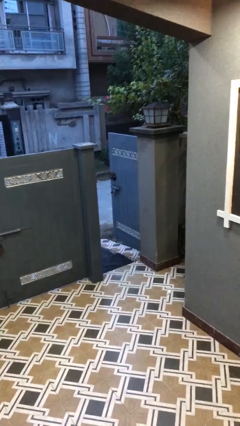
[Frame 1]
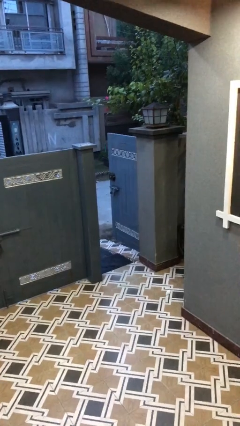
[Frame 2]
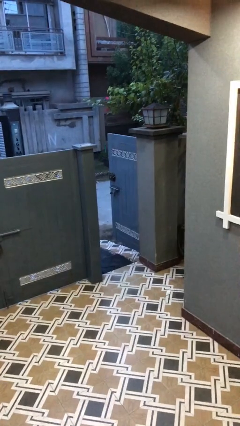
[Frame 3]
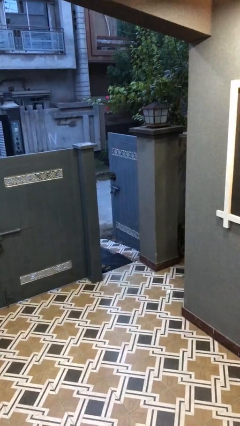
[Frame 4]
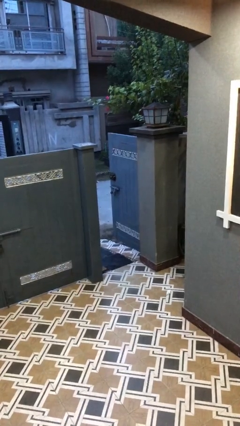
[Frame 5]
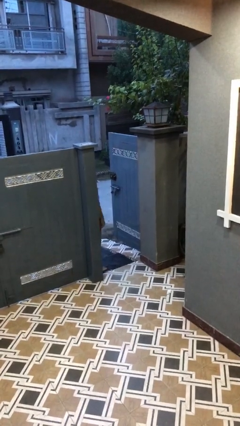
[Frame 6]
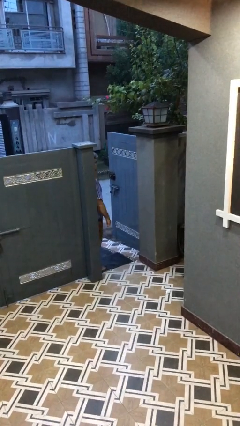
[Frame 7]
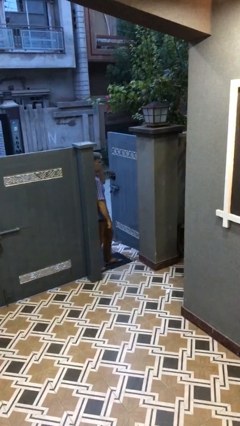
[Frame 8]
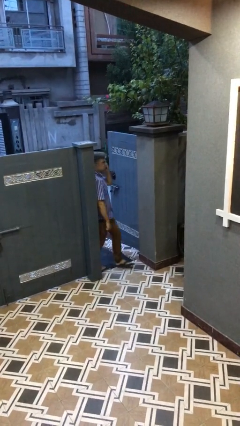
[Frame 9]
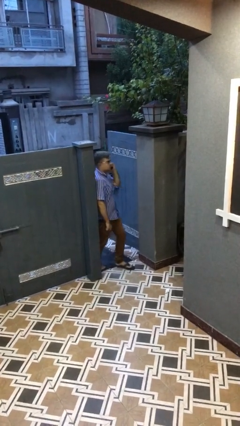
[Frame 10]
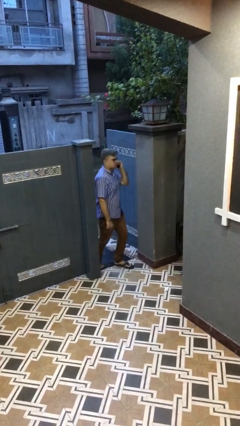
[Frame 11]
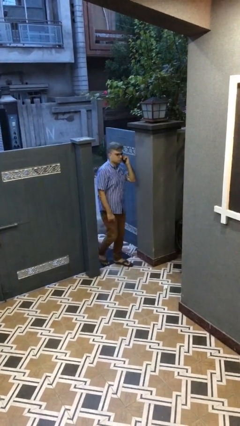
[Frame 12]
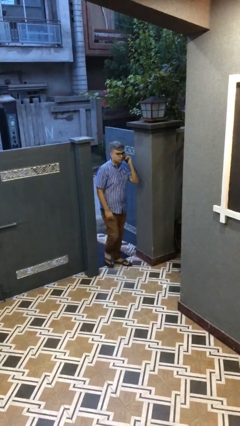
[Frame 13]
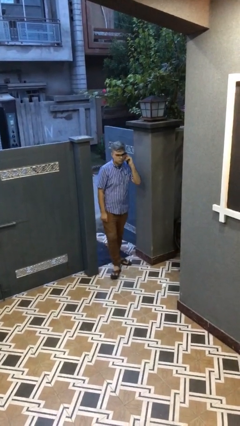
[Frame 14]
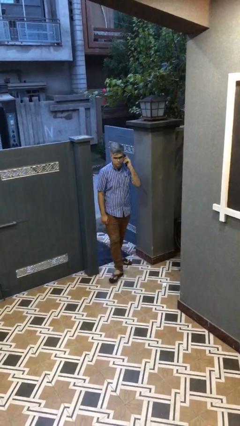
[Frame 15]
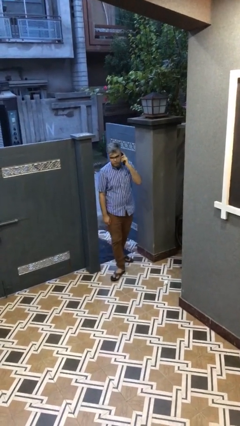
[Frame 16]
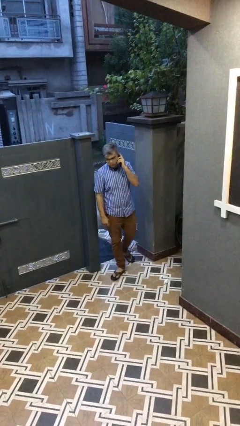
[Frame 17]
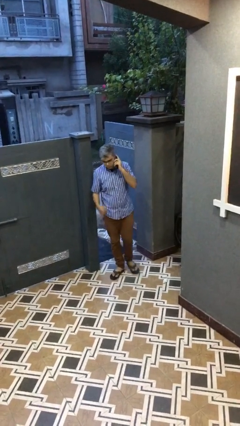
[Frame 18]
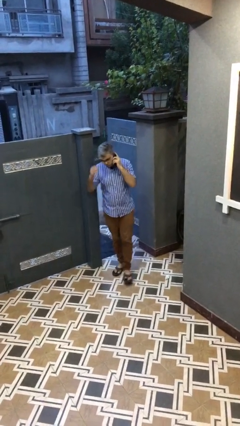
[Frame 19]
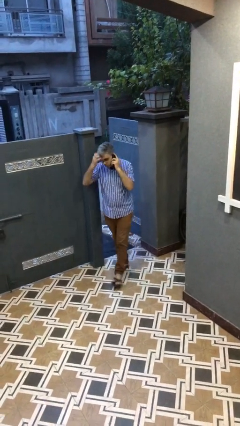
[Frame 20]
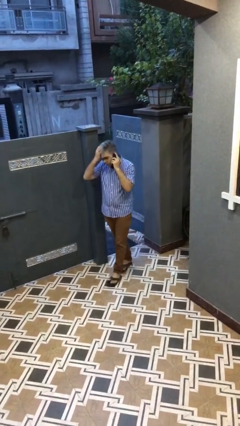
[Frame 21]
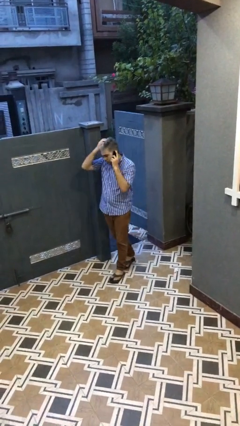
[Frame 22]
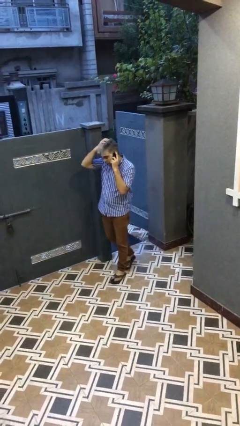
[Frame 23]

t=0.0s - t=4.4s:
person enters scene through structure

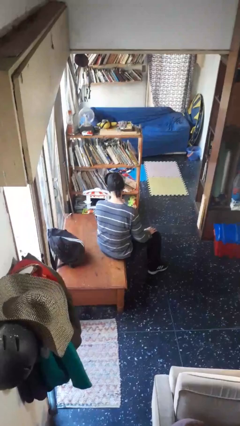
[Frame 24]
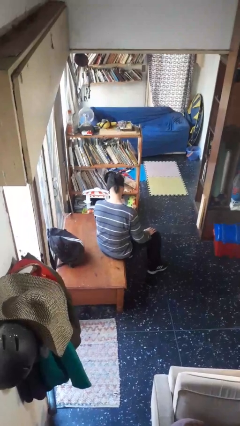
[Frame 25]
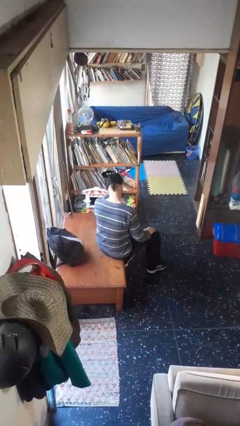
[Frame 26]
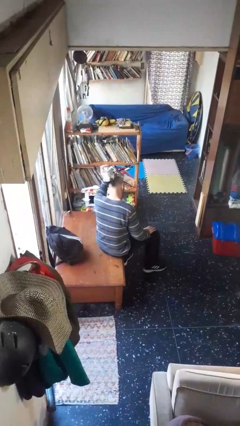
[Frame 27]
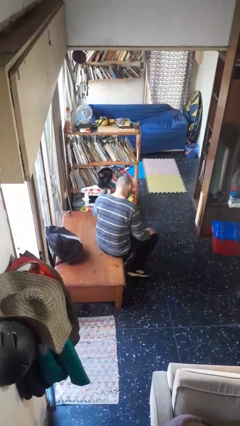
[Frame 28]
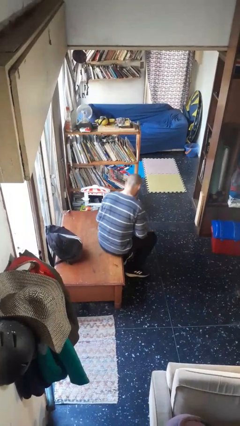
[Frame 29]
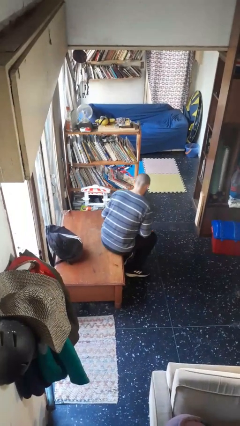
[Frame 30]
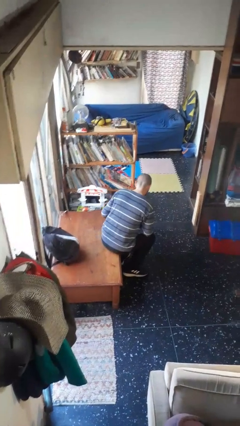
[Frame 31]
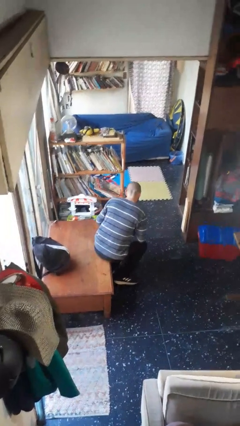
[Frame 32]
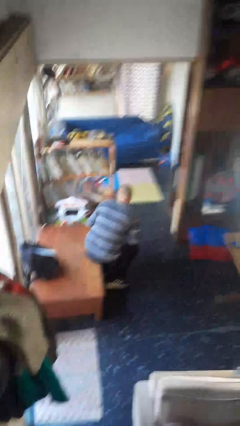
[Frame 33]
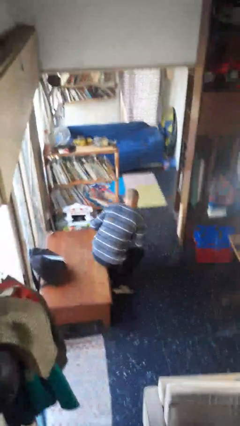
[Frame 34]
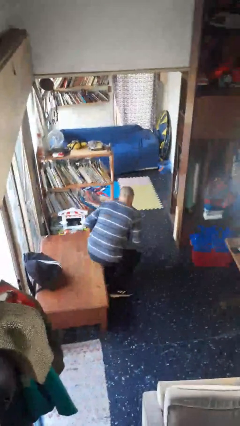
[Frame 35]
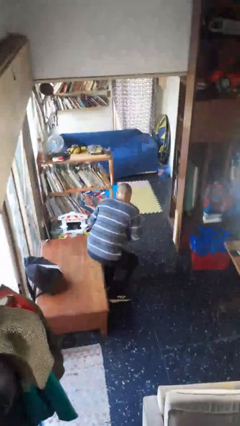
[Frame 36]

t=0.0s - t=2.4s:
person takes off facemask

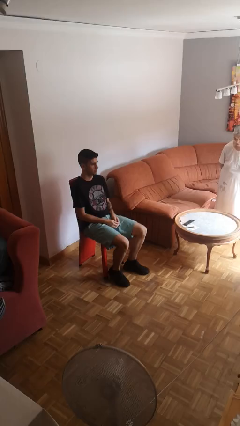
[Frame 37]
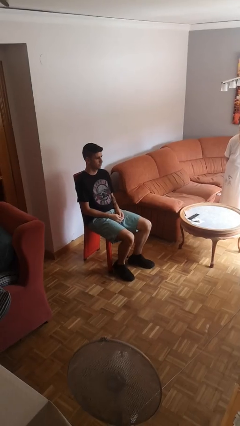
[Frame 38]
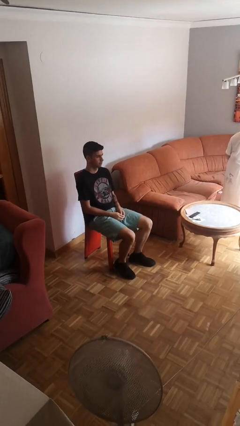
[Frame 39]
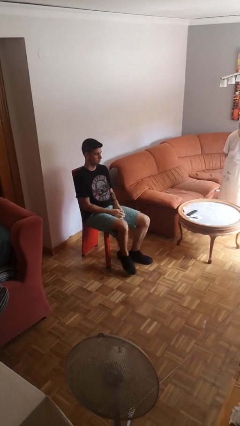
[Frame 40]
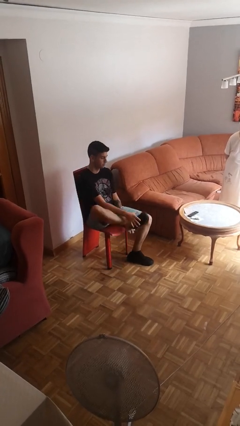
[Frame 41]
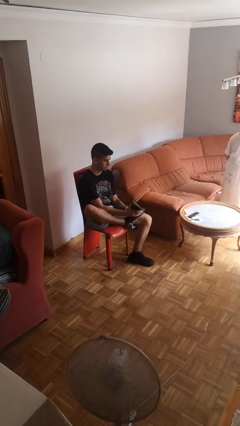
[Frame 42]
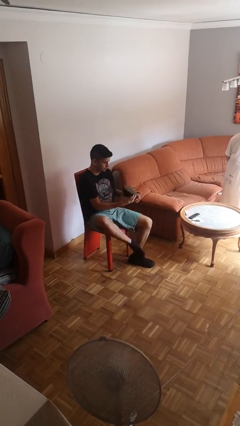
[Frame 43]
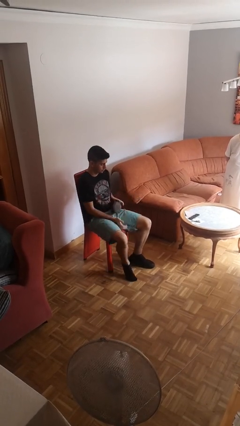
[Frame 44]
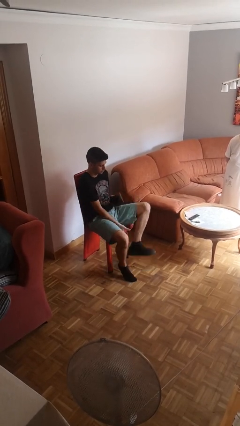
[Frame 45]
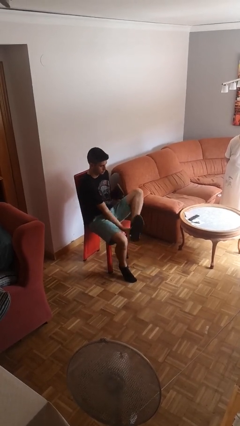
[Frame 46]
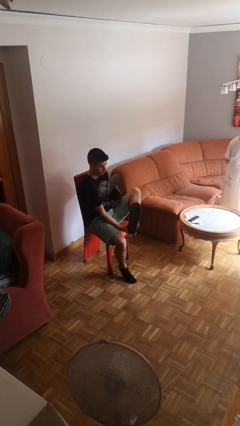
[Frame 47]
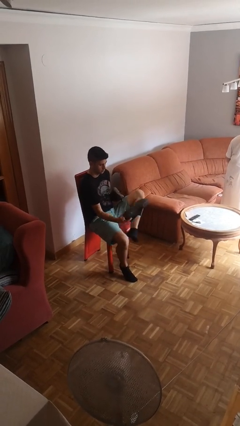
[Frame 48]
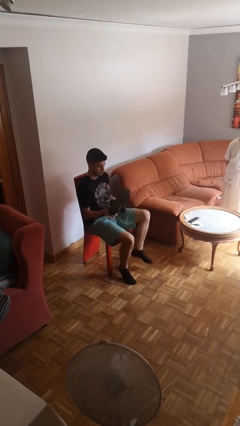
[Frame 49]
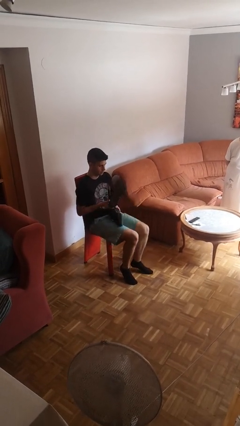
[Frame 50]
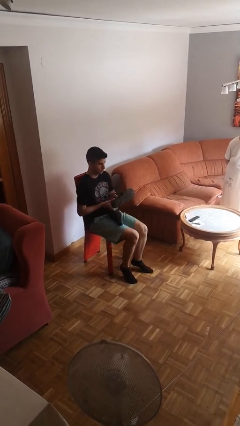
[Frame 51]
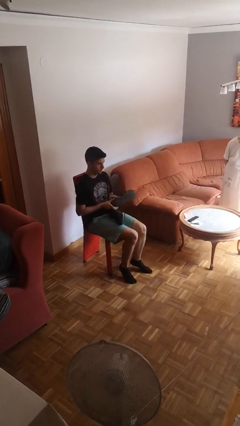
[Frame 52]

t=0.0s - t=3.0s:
person takes off shoes

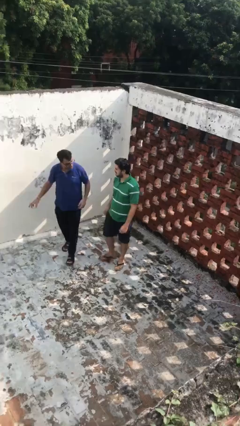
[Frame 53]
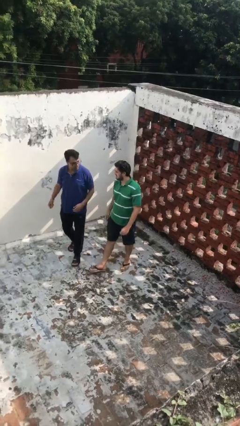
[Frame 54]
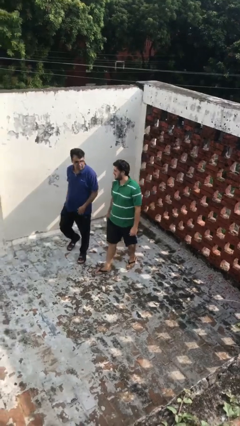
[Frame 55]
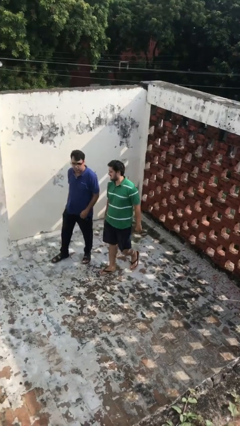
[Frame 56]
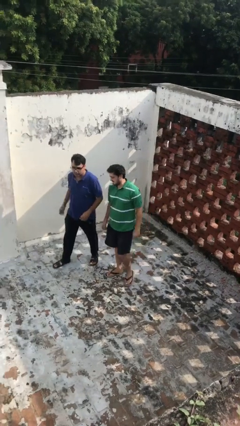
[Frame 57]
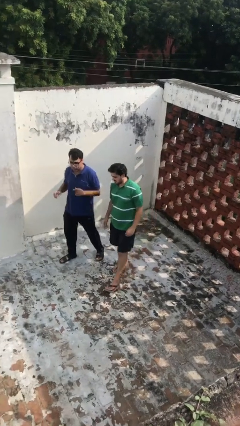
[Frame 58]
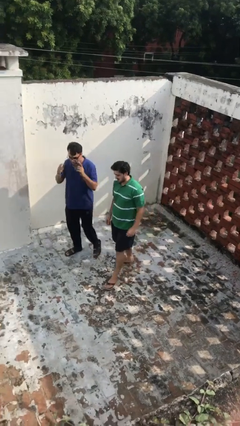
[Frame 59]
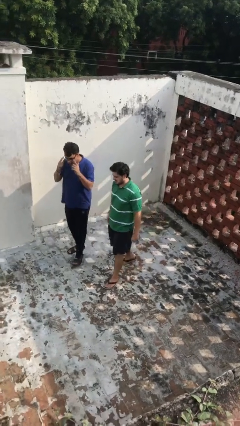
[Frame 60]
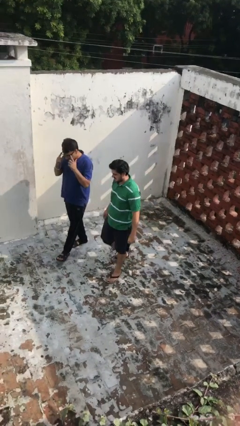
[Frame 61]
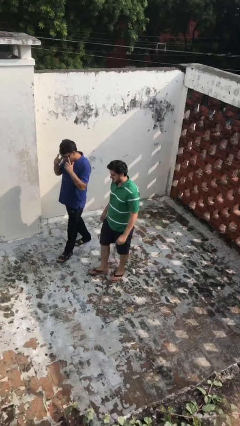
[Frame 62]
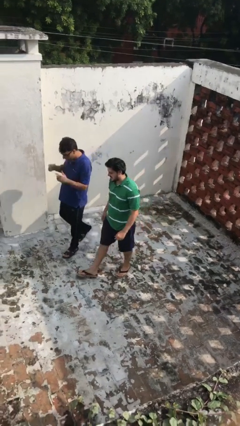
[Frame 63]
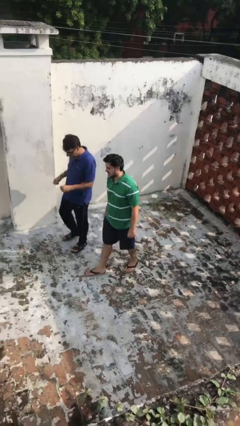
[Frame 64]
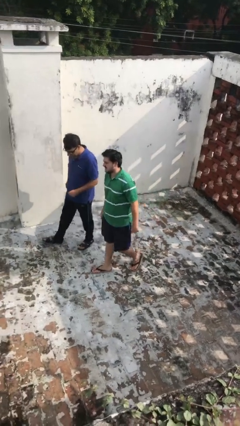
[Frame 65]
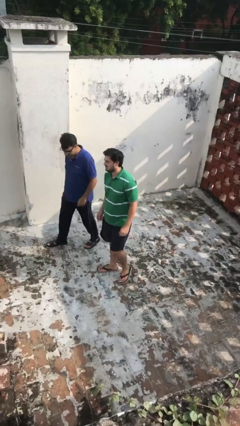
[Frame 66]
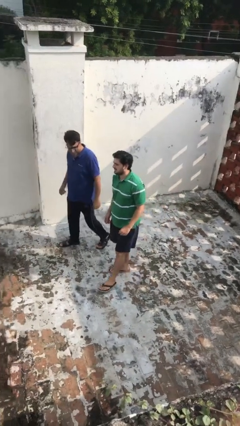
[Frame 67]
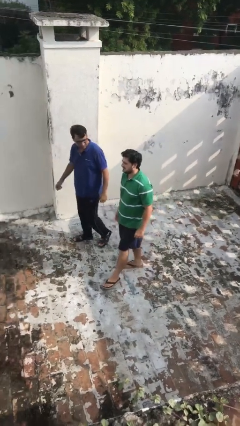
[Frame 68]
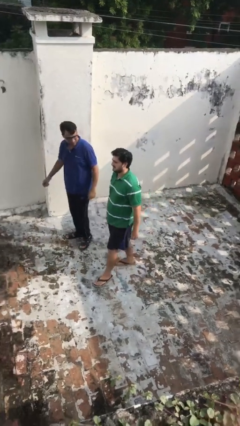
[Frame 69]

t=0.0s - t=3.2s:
person talks to person

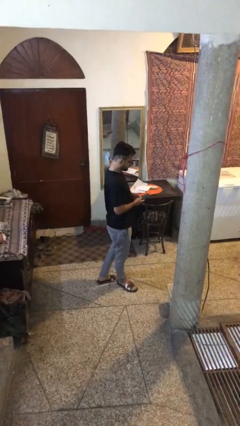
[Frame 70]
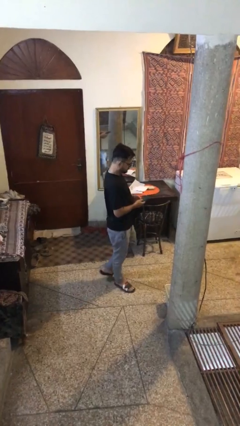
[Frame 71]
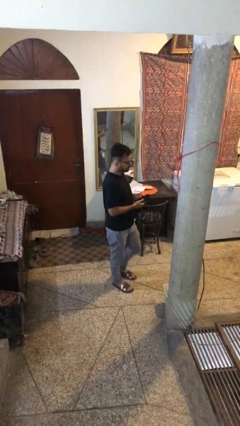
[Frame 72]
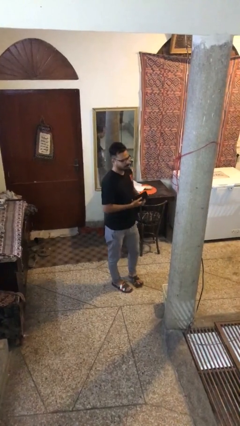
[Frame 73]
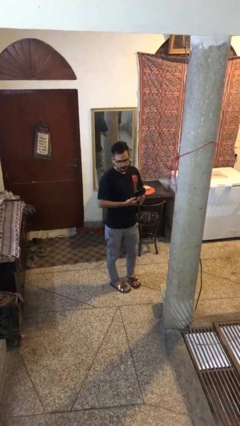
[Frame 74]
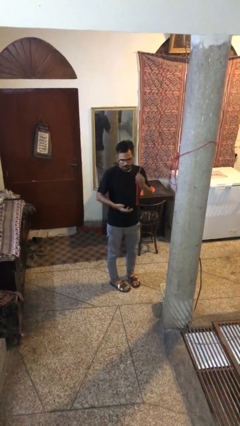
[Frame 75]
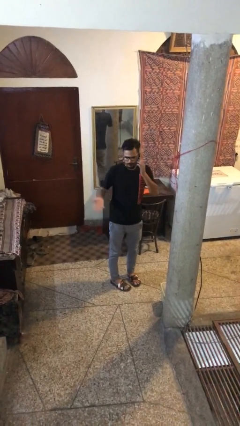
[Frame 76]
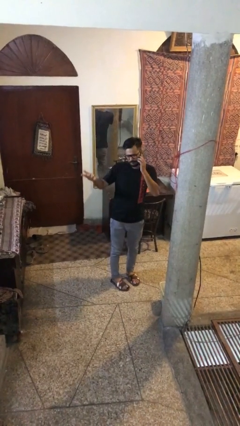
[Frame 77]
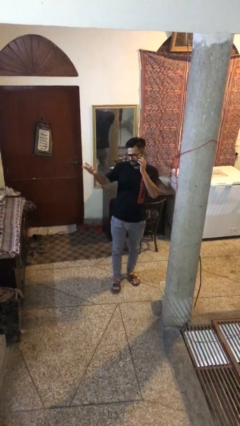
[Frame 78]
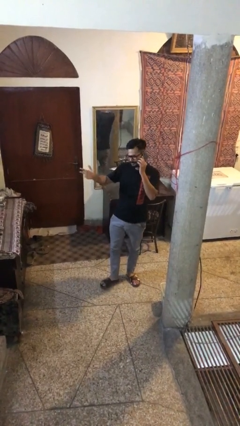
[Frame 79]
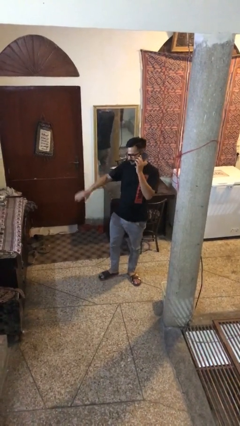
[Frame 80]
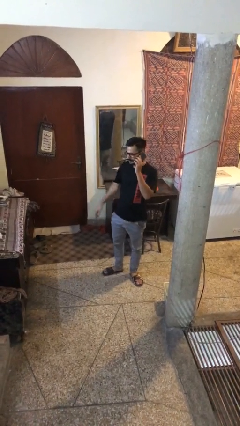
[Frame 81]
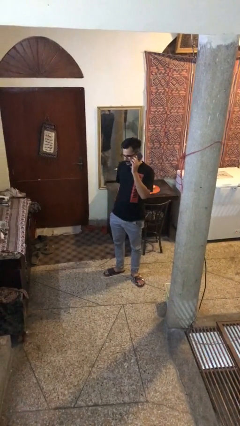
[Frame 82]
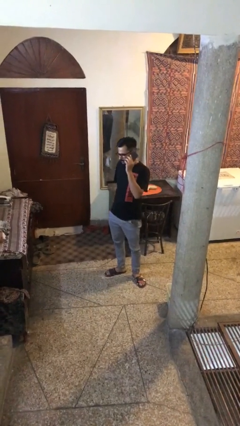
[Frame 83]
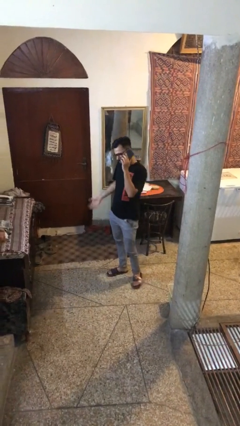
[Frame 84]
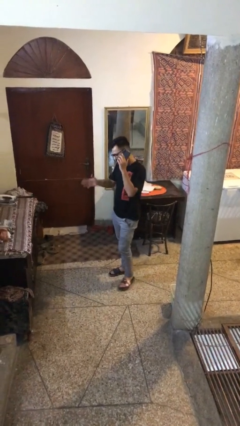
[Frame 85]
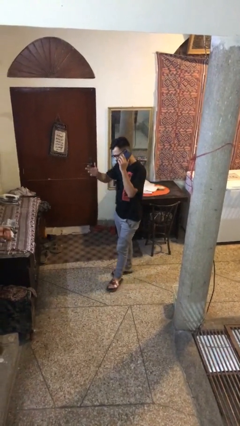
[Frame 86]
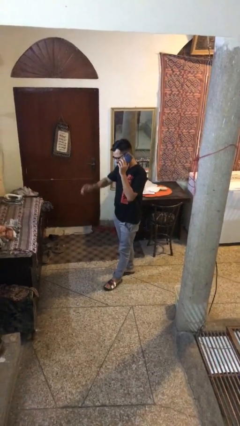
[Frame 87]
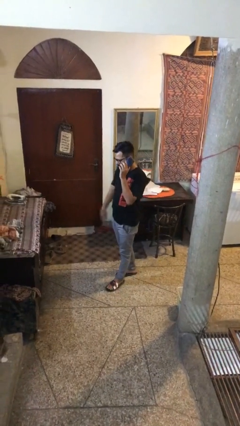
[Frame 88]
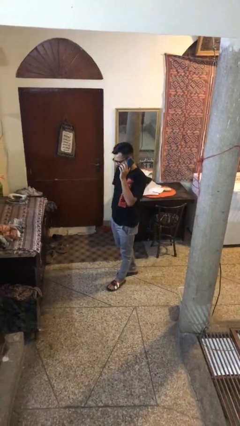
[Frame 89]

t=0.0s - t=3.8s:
person talks on phone

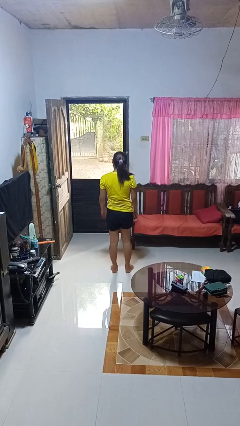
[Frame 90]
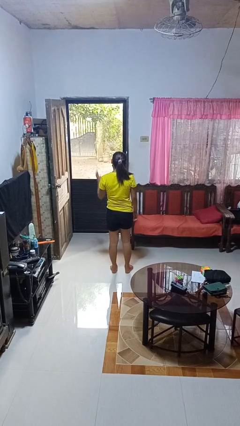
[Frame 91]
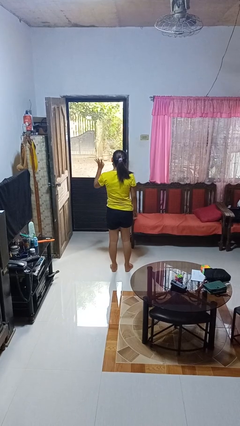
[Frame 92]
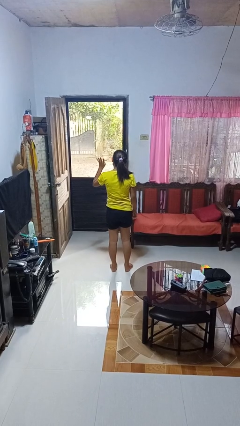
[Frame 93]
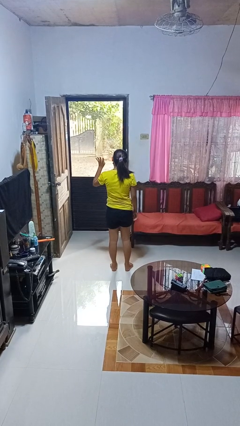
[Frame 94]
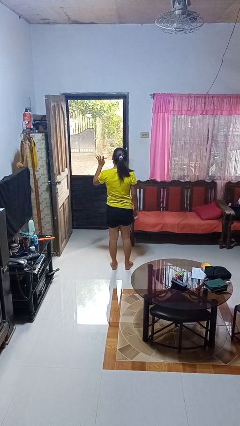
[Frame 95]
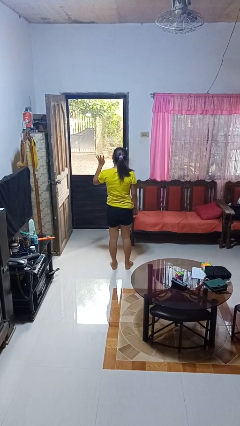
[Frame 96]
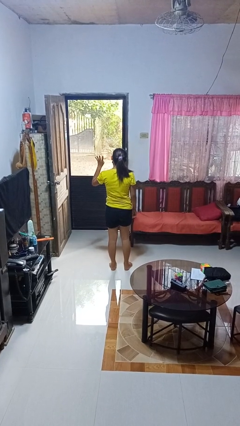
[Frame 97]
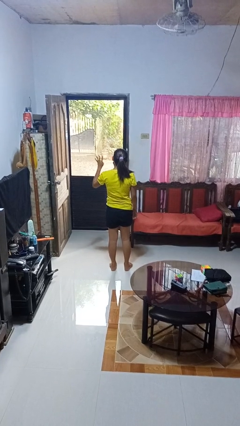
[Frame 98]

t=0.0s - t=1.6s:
person gestures number four
